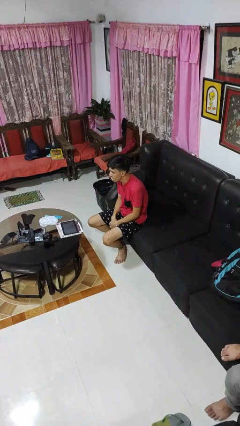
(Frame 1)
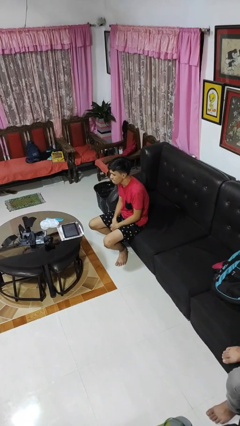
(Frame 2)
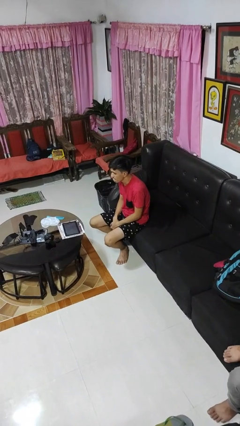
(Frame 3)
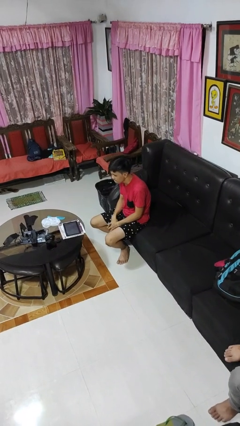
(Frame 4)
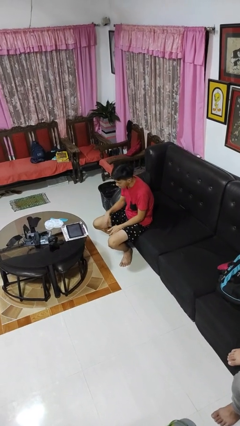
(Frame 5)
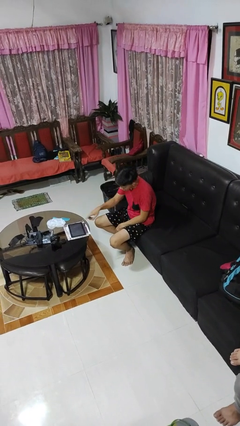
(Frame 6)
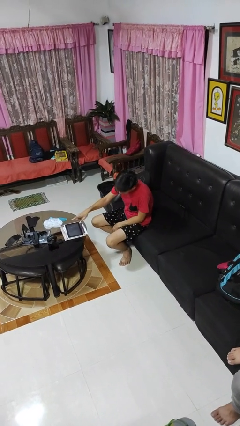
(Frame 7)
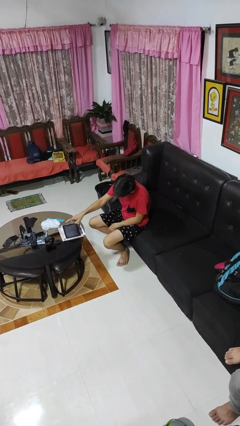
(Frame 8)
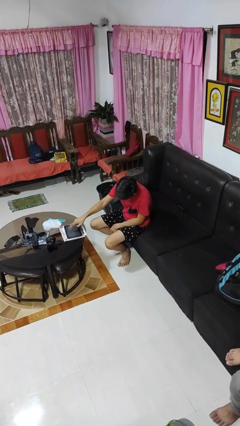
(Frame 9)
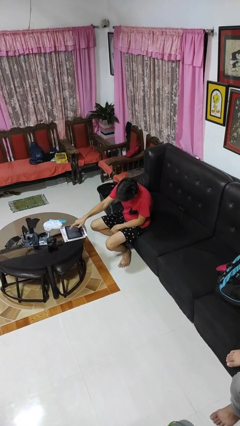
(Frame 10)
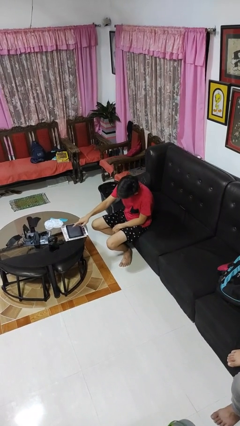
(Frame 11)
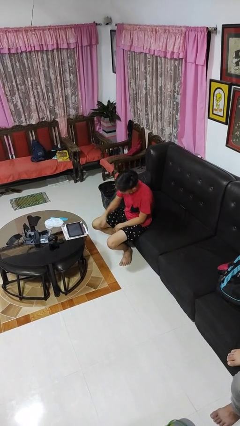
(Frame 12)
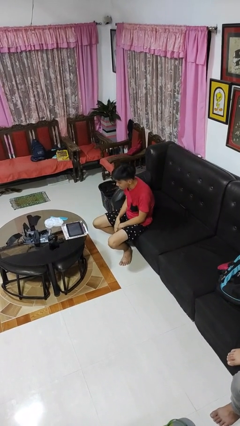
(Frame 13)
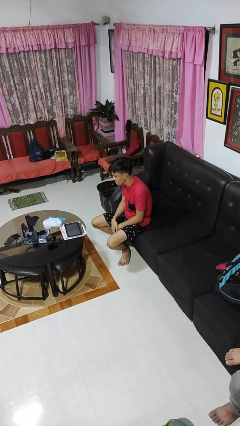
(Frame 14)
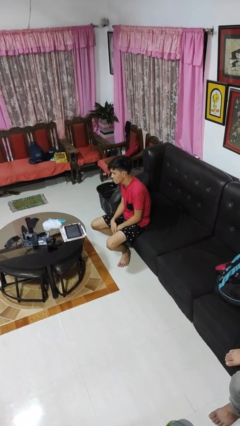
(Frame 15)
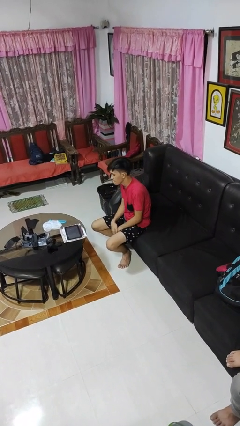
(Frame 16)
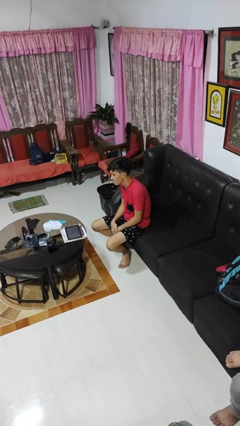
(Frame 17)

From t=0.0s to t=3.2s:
person taps object with finger

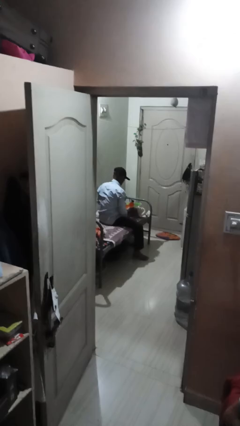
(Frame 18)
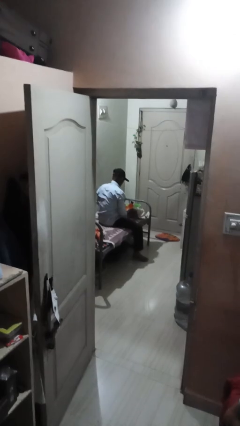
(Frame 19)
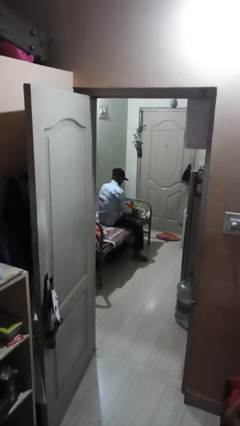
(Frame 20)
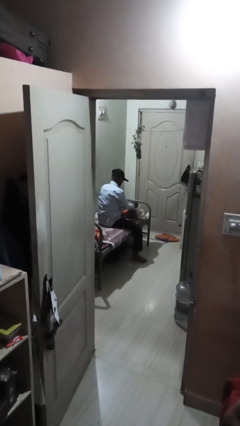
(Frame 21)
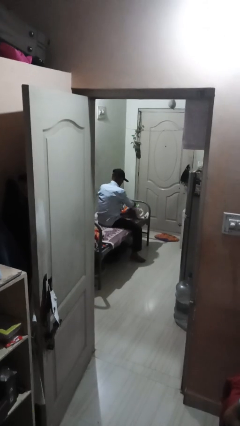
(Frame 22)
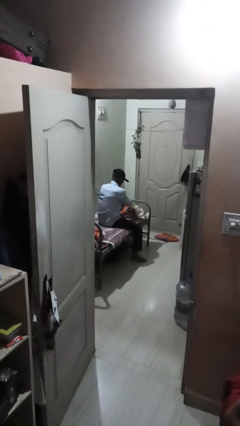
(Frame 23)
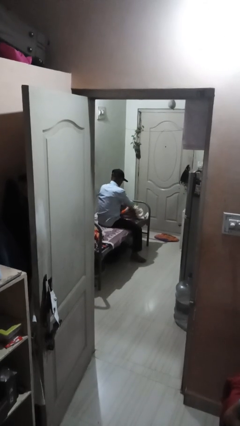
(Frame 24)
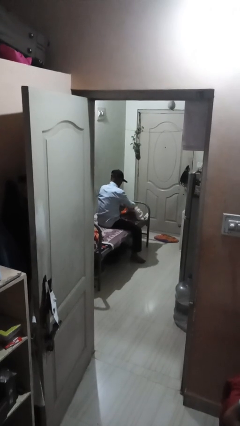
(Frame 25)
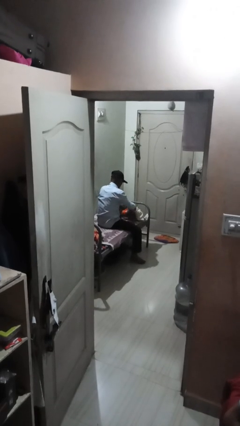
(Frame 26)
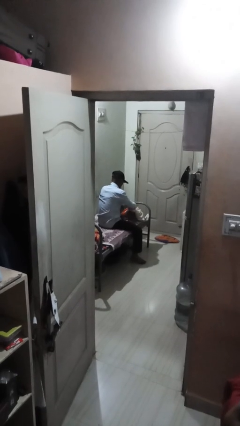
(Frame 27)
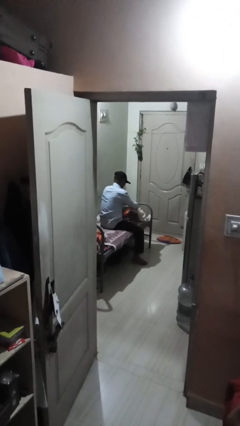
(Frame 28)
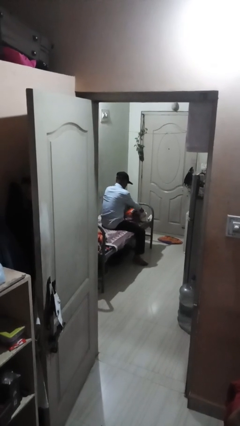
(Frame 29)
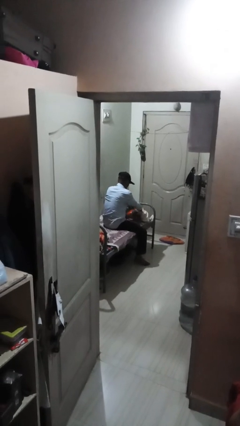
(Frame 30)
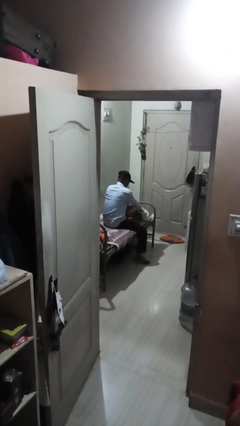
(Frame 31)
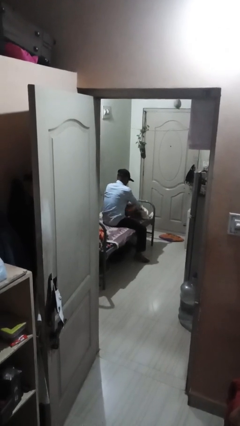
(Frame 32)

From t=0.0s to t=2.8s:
person searches in bag

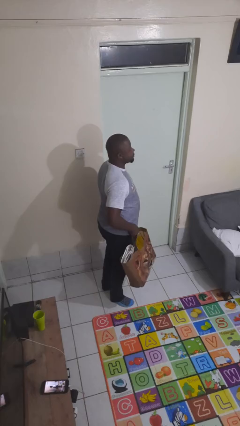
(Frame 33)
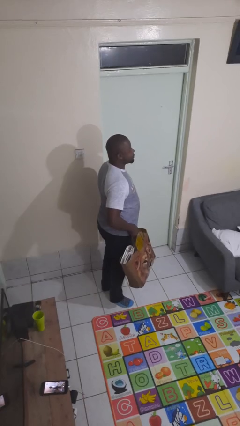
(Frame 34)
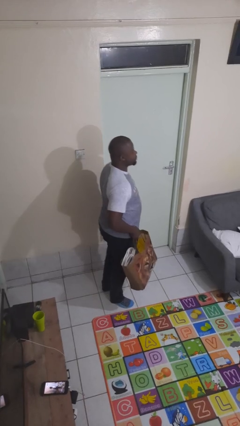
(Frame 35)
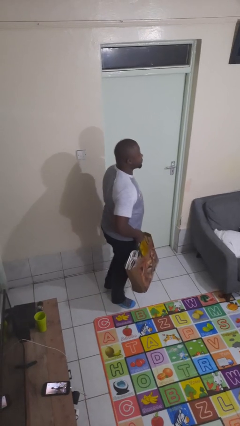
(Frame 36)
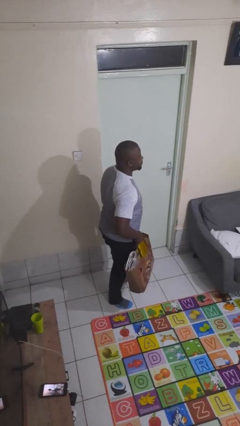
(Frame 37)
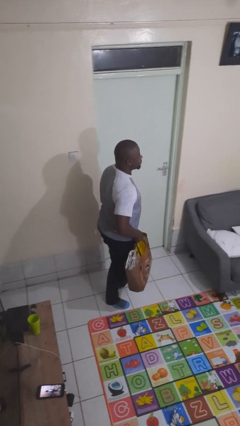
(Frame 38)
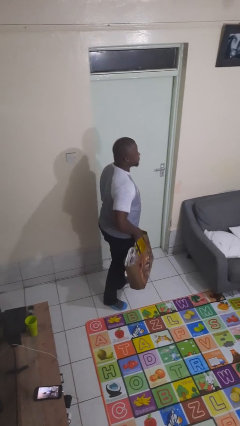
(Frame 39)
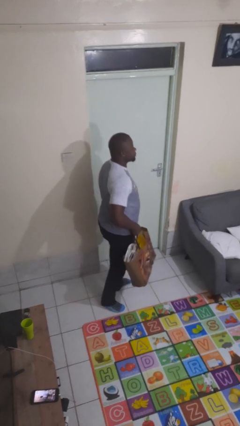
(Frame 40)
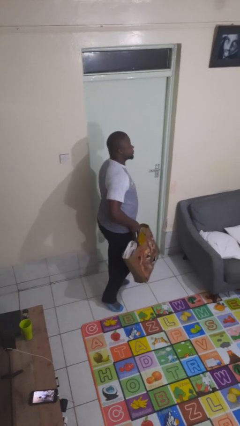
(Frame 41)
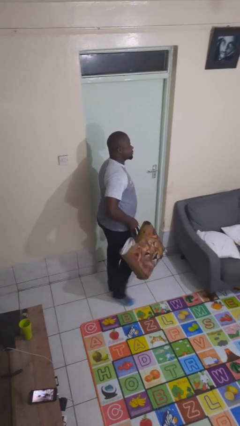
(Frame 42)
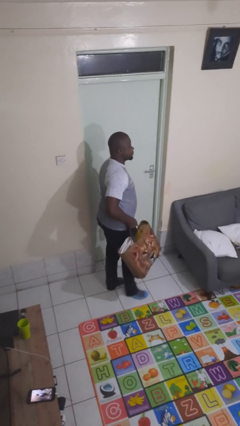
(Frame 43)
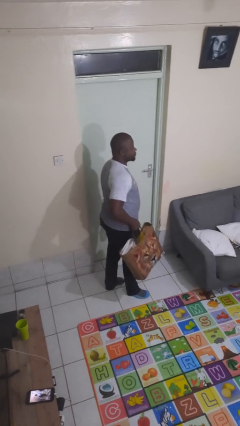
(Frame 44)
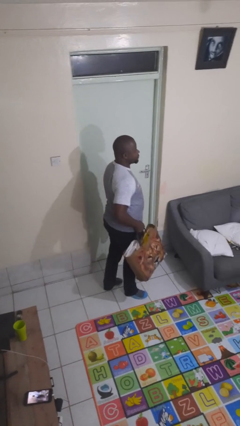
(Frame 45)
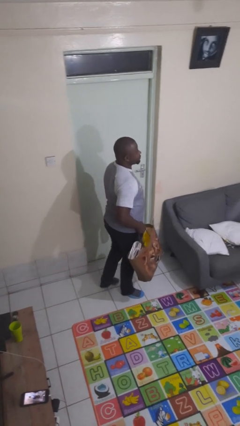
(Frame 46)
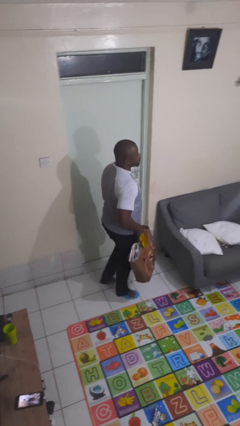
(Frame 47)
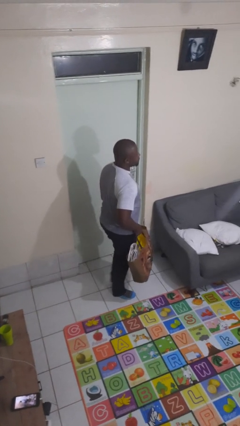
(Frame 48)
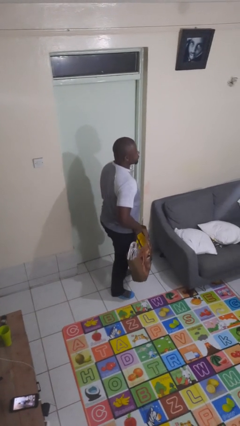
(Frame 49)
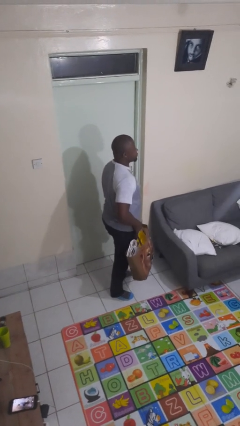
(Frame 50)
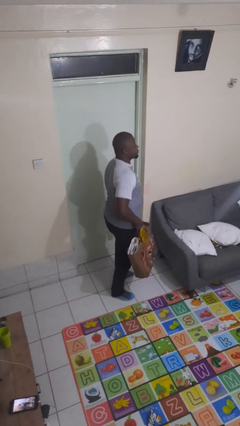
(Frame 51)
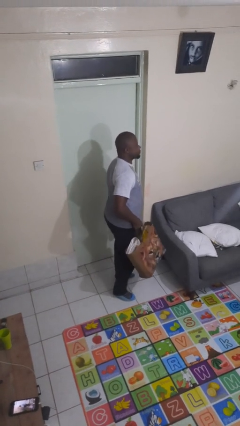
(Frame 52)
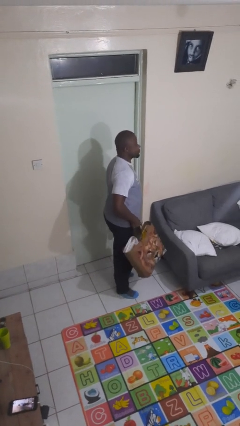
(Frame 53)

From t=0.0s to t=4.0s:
person carries groceries

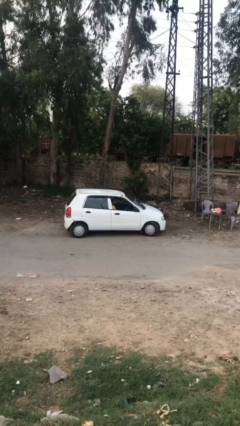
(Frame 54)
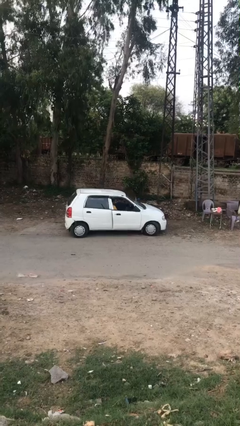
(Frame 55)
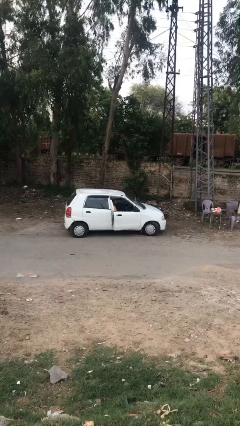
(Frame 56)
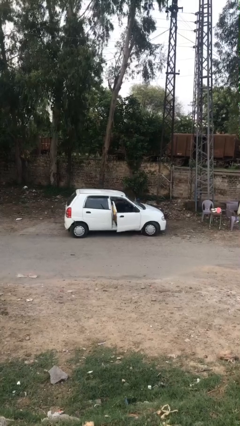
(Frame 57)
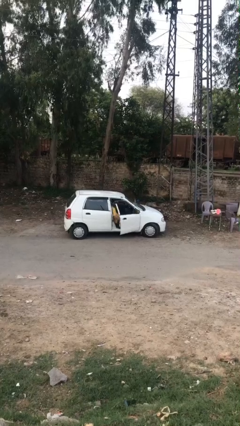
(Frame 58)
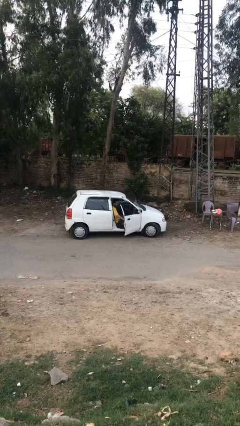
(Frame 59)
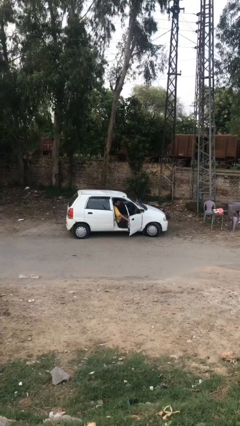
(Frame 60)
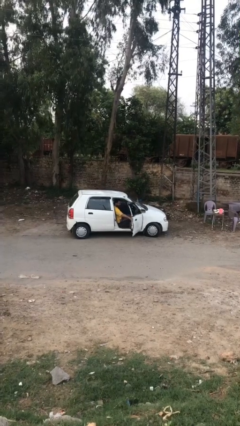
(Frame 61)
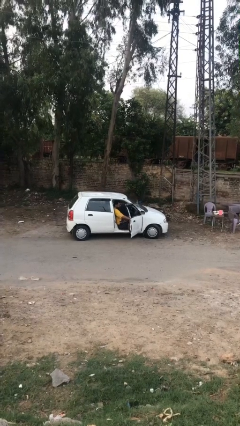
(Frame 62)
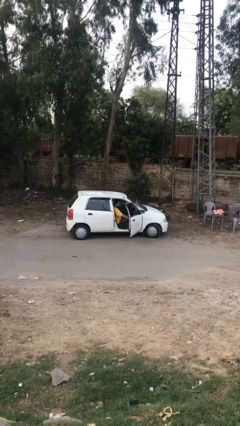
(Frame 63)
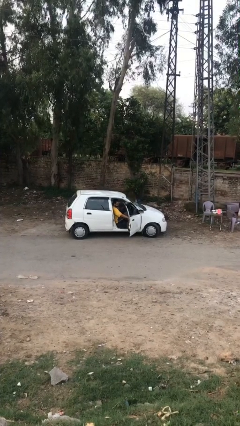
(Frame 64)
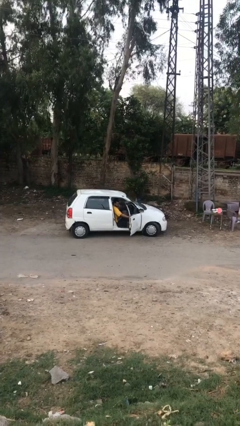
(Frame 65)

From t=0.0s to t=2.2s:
person opens car door

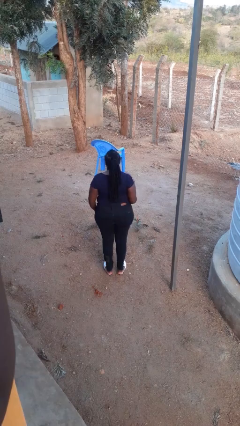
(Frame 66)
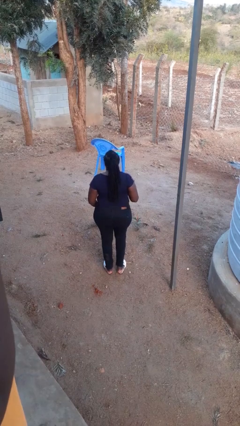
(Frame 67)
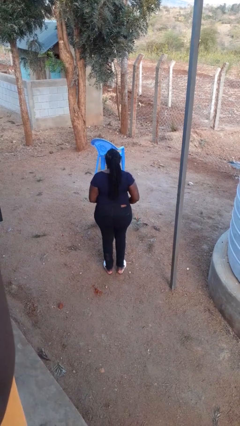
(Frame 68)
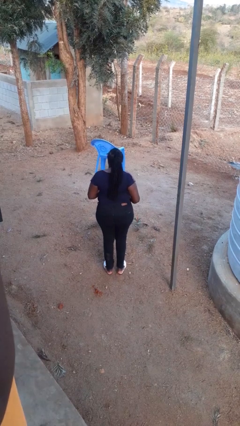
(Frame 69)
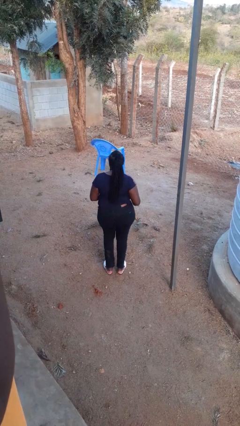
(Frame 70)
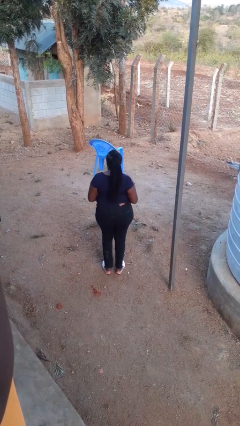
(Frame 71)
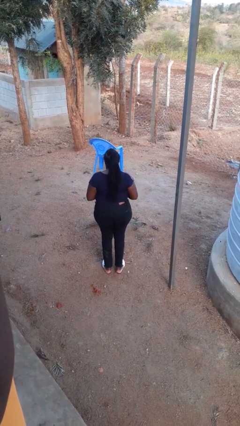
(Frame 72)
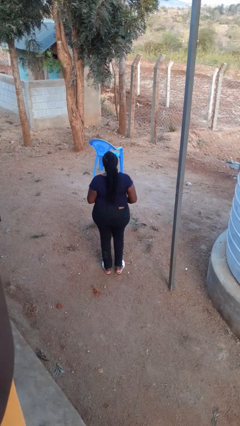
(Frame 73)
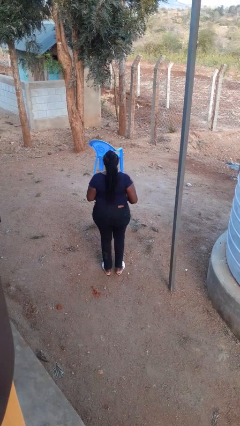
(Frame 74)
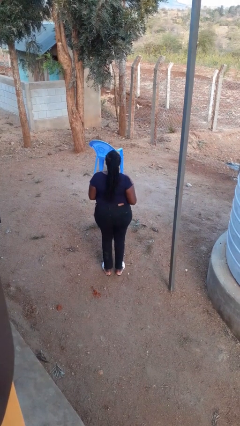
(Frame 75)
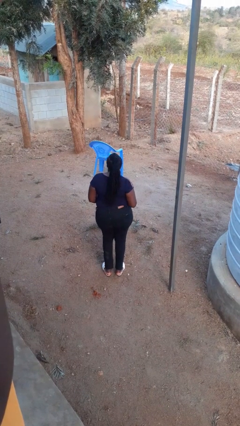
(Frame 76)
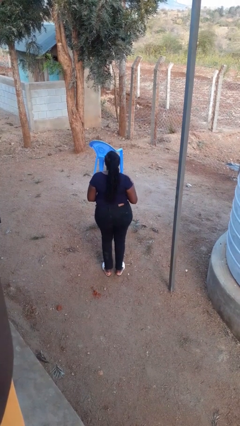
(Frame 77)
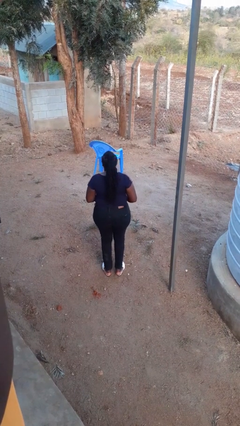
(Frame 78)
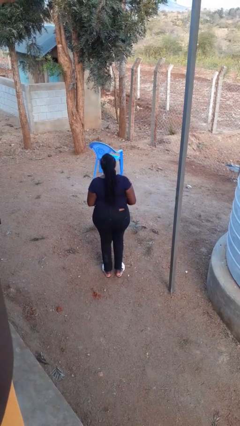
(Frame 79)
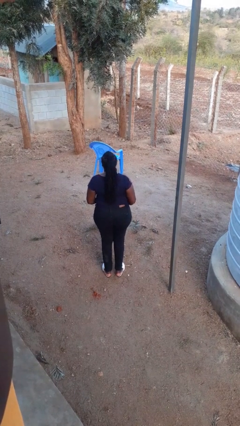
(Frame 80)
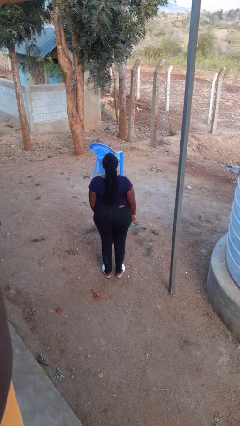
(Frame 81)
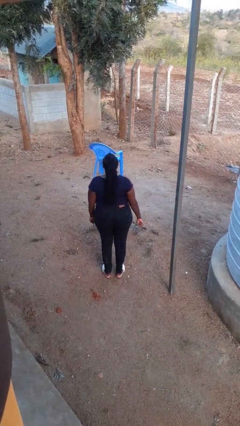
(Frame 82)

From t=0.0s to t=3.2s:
person wiggles hips

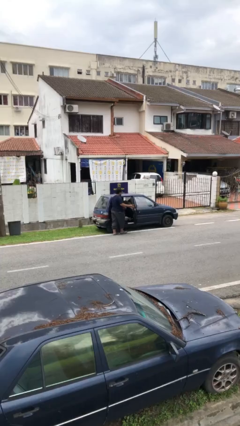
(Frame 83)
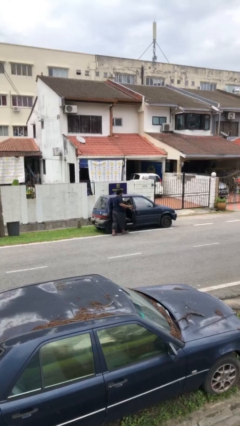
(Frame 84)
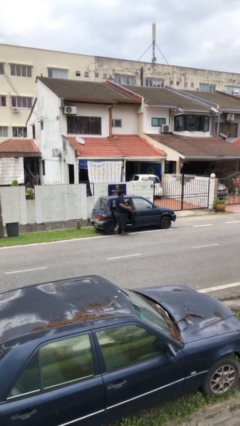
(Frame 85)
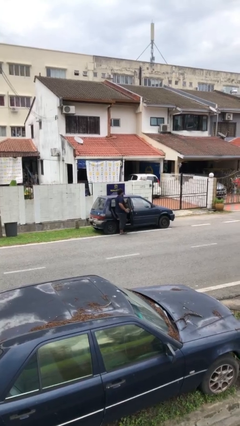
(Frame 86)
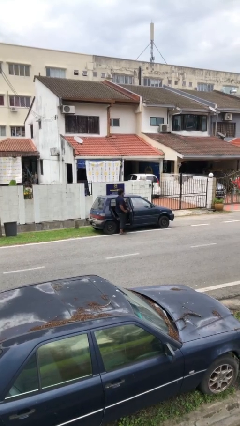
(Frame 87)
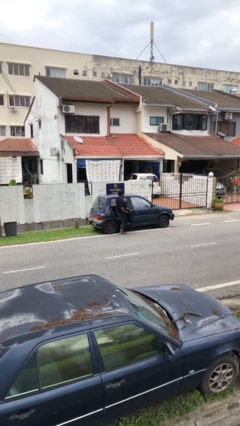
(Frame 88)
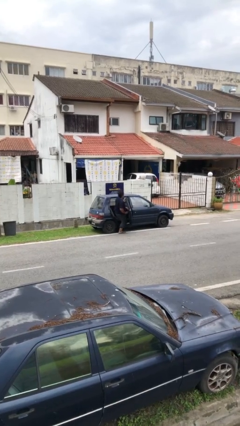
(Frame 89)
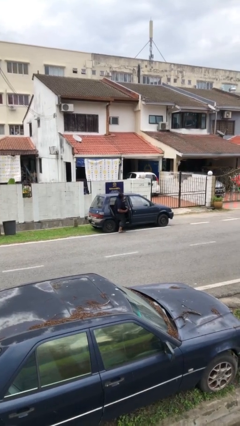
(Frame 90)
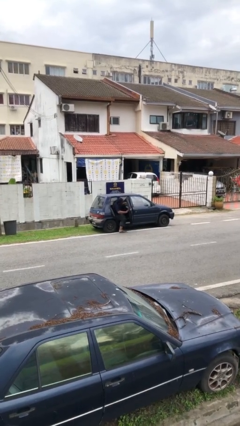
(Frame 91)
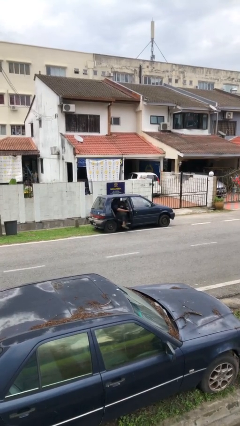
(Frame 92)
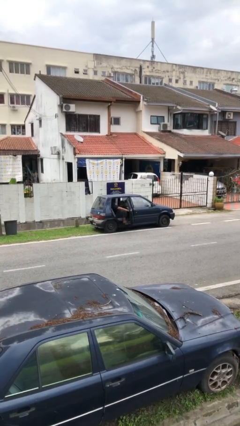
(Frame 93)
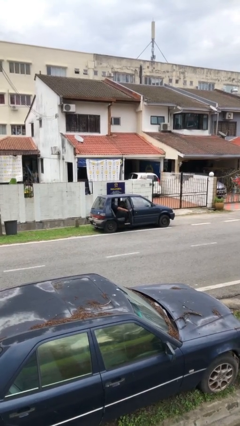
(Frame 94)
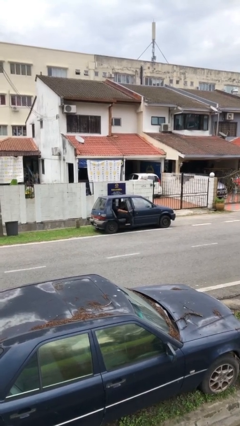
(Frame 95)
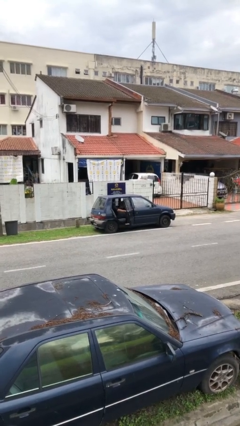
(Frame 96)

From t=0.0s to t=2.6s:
person enters car
